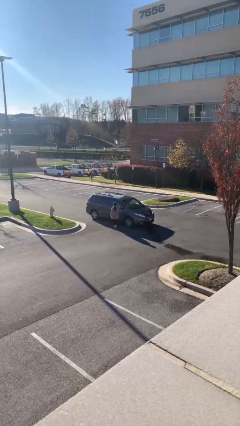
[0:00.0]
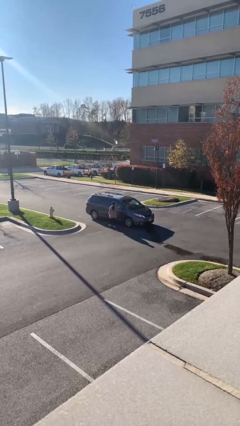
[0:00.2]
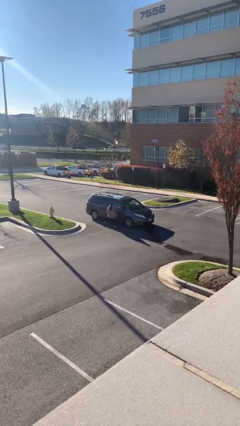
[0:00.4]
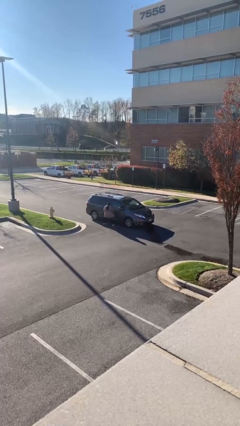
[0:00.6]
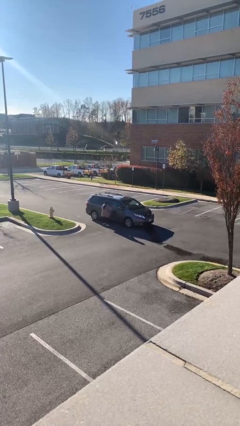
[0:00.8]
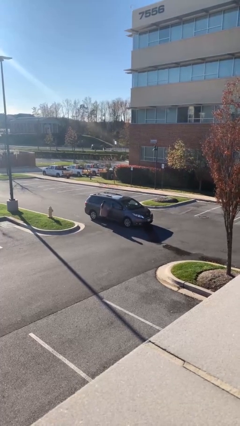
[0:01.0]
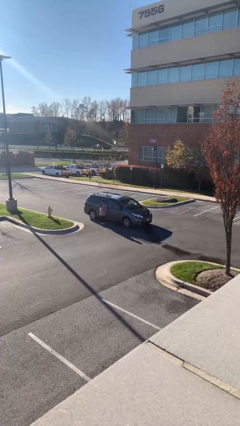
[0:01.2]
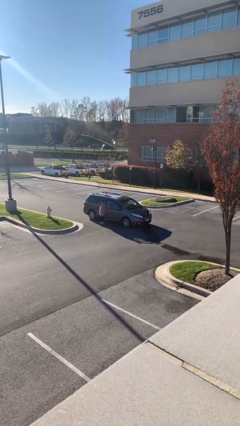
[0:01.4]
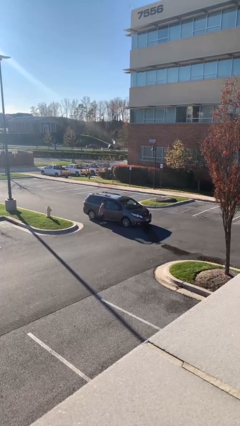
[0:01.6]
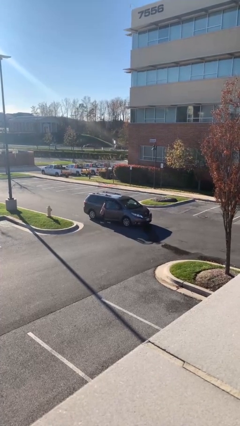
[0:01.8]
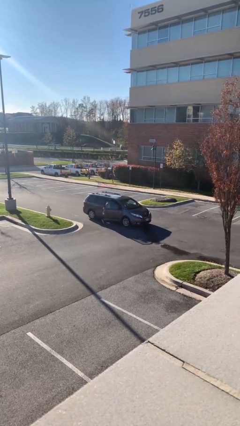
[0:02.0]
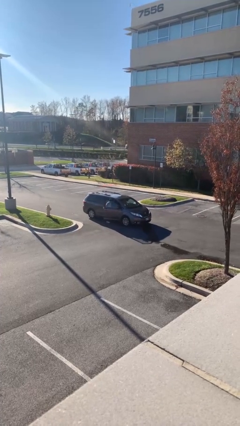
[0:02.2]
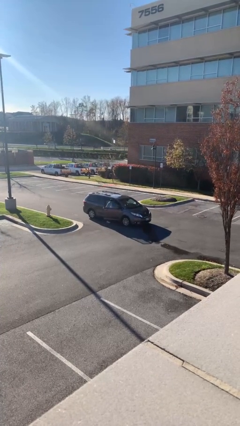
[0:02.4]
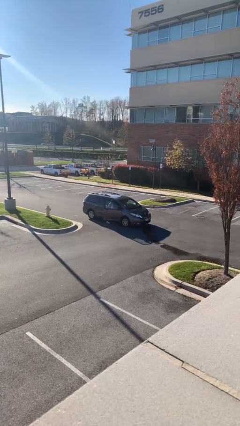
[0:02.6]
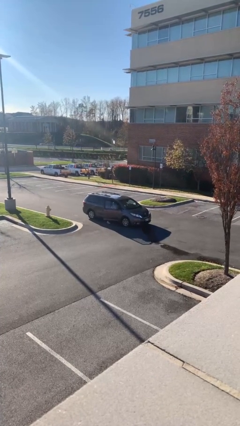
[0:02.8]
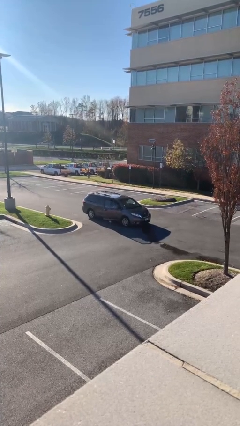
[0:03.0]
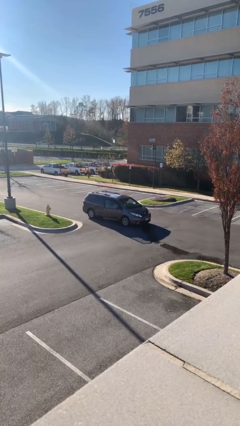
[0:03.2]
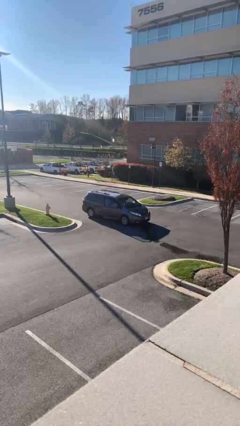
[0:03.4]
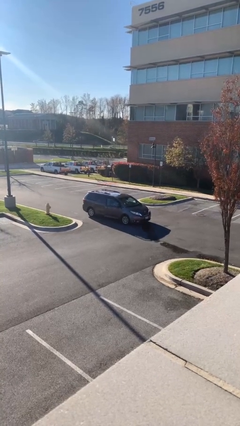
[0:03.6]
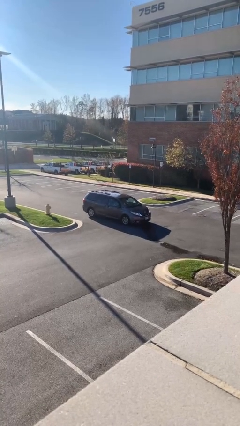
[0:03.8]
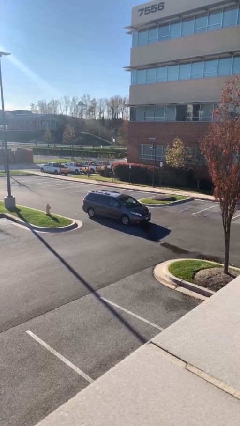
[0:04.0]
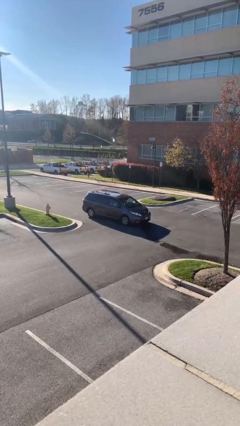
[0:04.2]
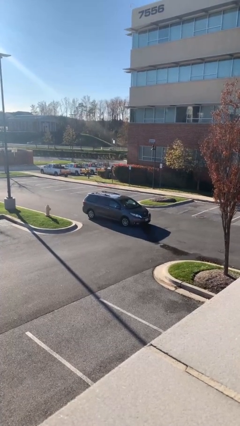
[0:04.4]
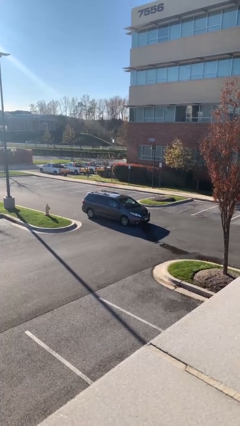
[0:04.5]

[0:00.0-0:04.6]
car picks up person

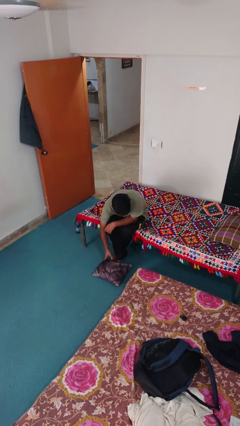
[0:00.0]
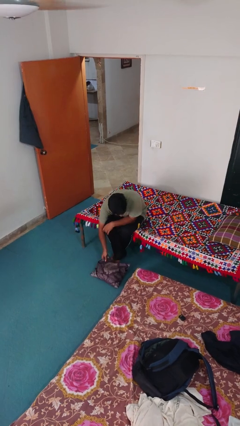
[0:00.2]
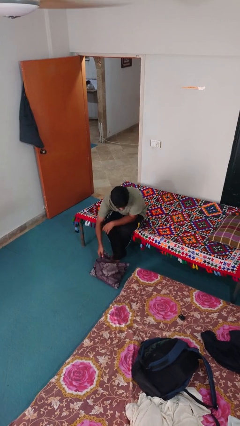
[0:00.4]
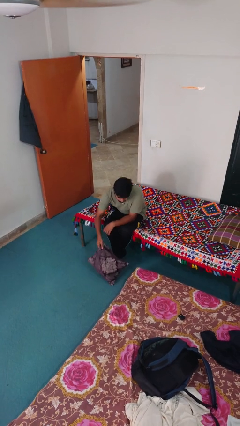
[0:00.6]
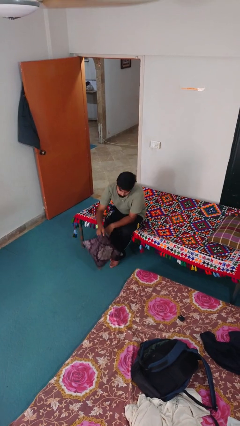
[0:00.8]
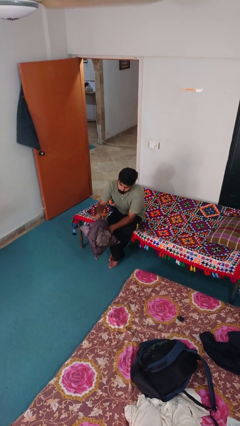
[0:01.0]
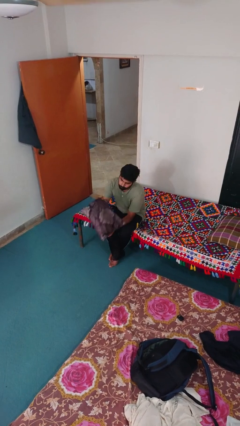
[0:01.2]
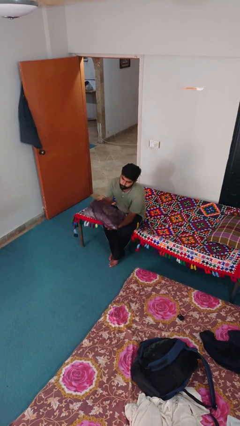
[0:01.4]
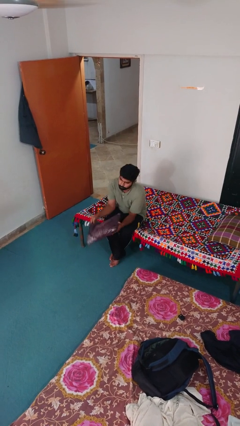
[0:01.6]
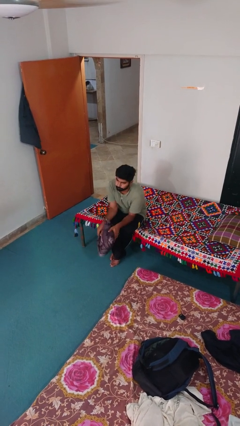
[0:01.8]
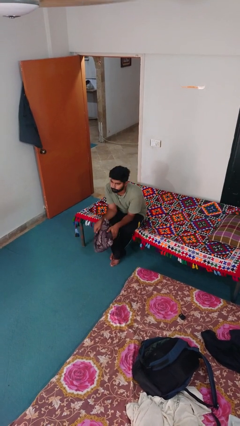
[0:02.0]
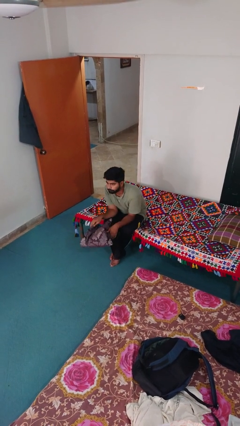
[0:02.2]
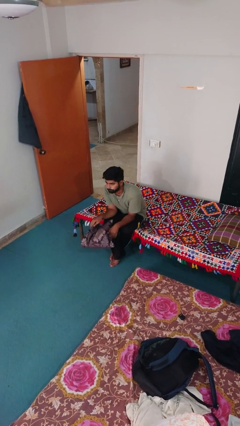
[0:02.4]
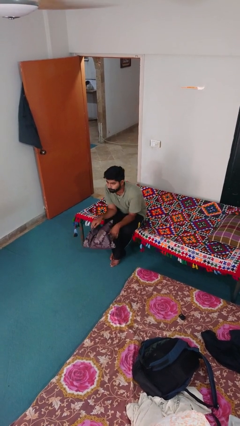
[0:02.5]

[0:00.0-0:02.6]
person picks up object from floor

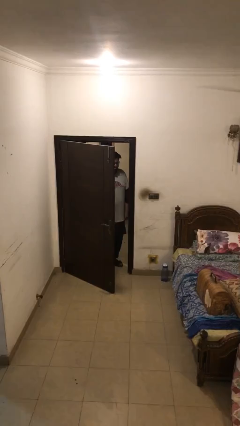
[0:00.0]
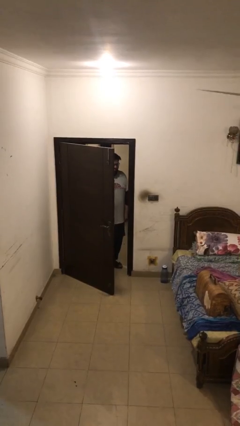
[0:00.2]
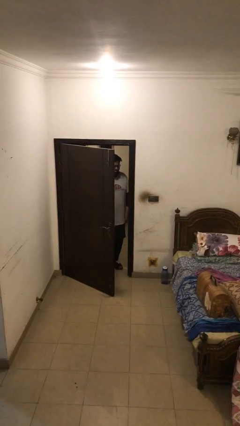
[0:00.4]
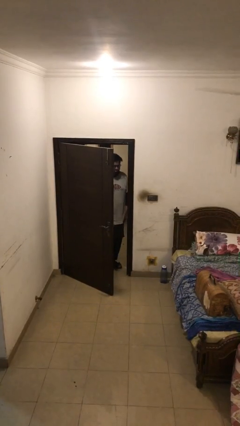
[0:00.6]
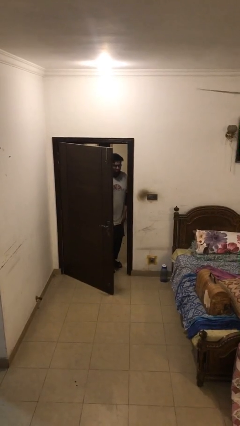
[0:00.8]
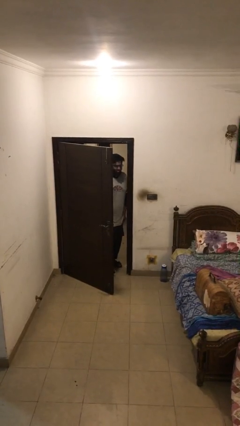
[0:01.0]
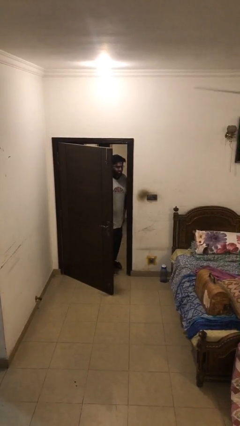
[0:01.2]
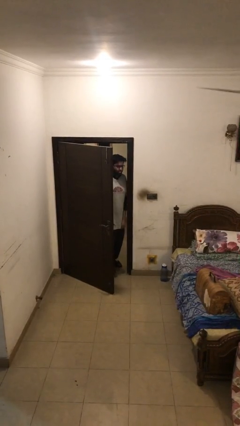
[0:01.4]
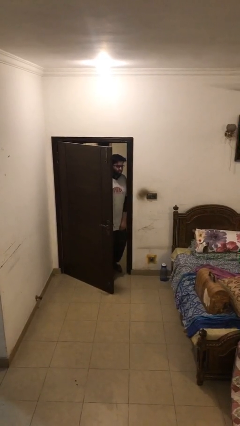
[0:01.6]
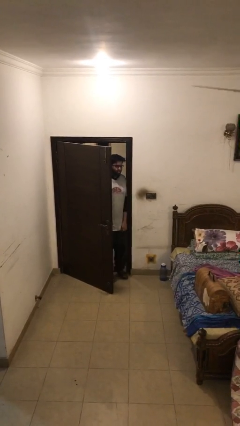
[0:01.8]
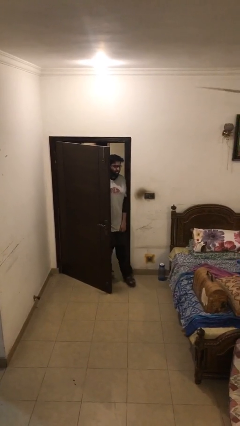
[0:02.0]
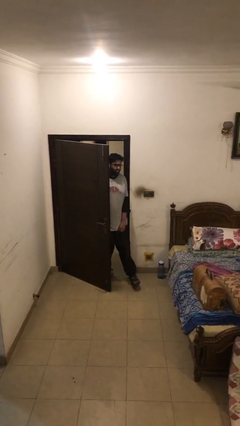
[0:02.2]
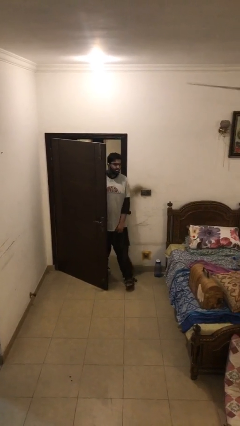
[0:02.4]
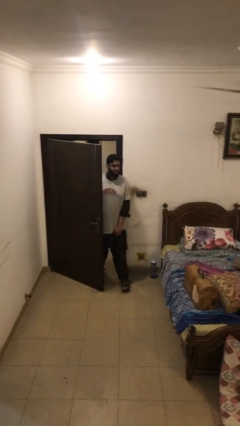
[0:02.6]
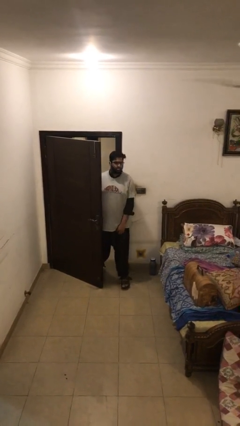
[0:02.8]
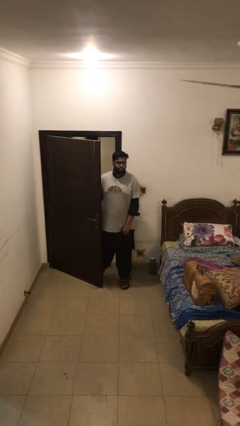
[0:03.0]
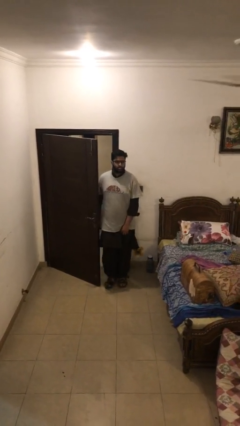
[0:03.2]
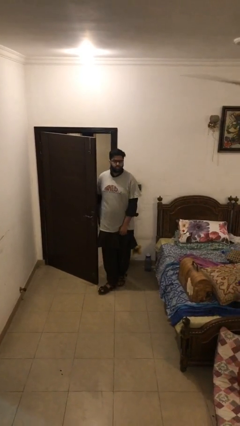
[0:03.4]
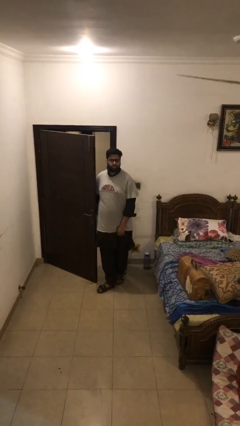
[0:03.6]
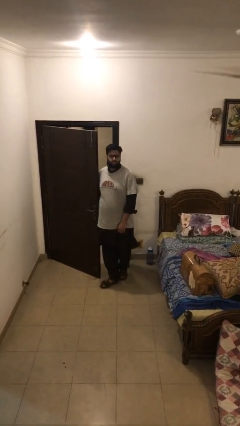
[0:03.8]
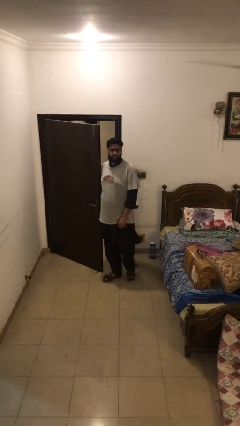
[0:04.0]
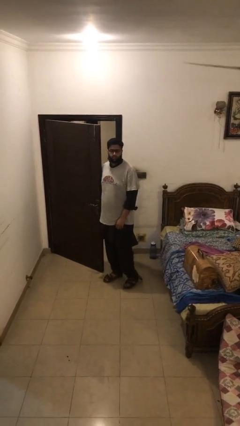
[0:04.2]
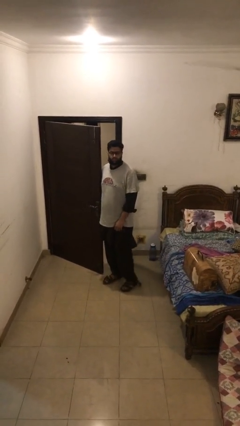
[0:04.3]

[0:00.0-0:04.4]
person enters scene through structure

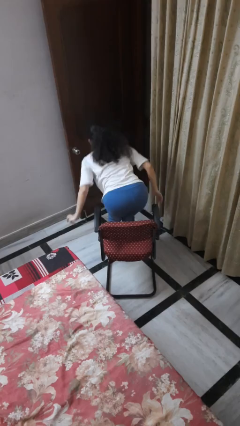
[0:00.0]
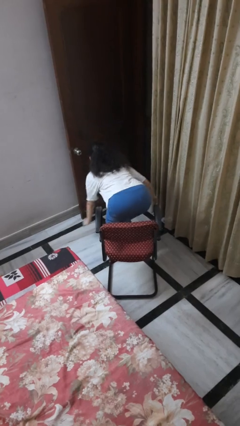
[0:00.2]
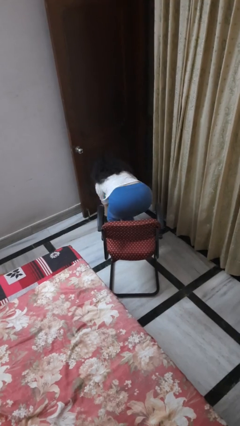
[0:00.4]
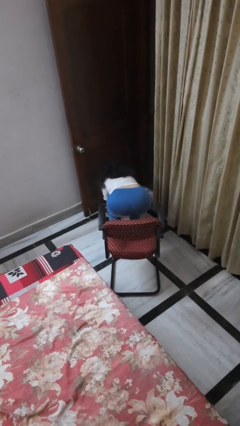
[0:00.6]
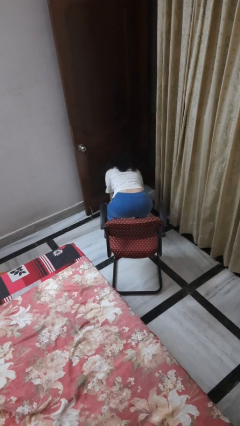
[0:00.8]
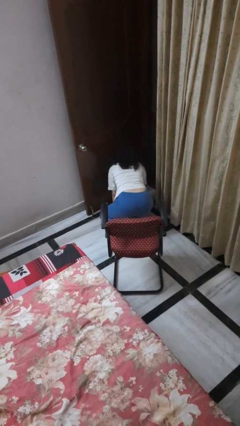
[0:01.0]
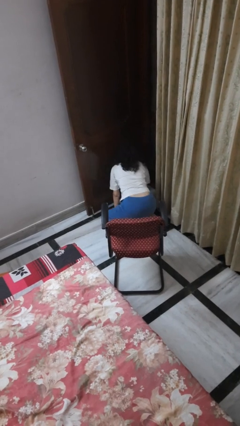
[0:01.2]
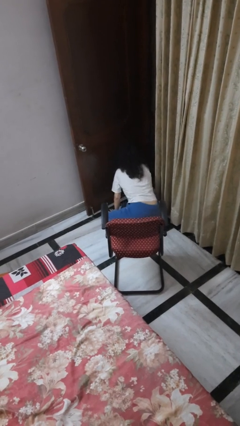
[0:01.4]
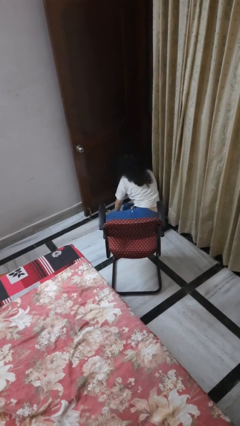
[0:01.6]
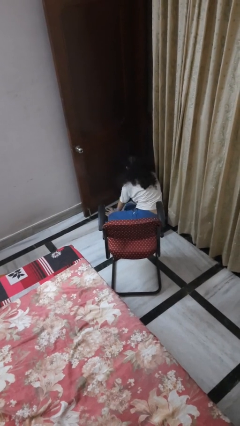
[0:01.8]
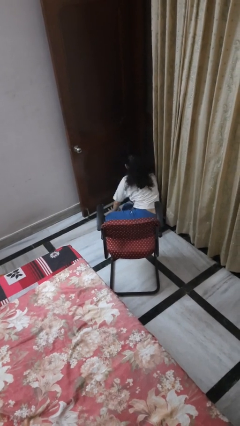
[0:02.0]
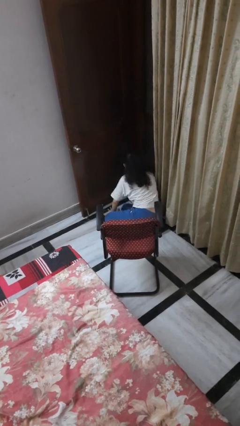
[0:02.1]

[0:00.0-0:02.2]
person falls from chair
